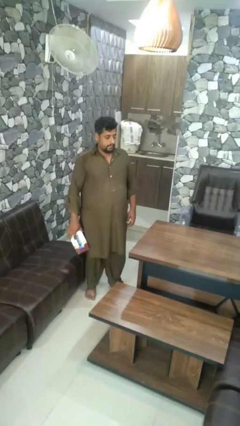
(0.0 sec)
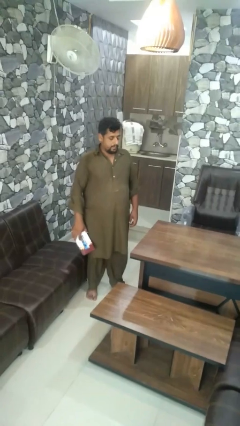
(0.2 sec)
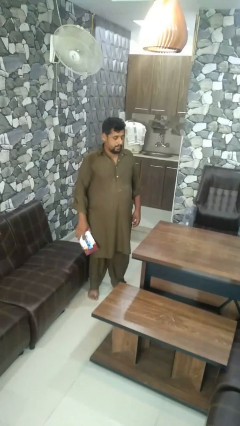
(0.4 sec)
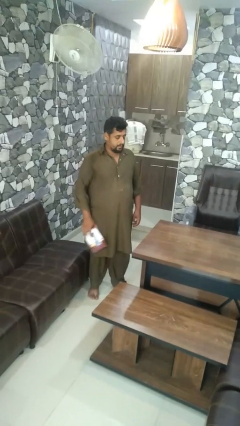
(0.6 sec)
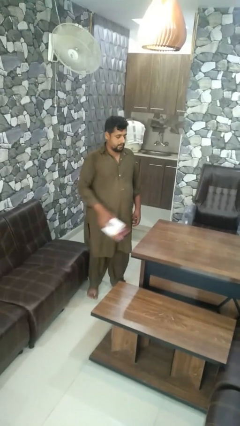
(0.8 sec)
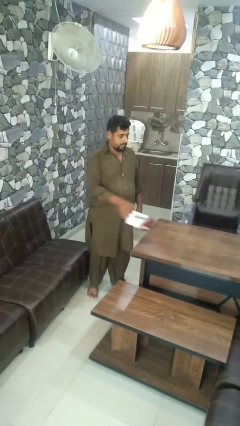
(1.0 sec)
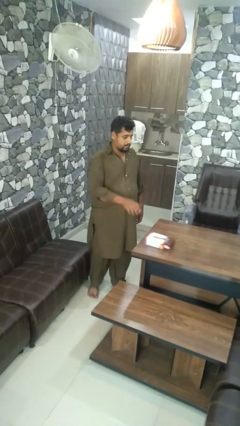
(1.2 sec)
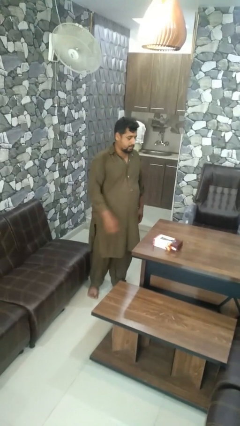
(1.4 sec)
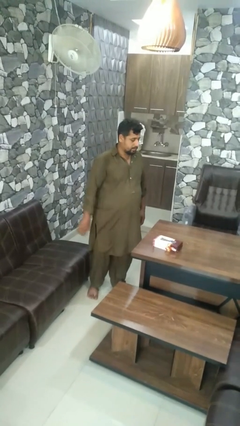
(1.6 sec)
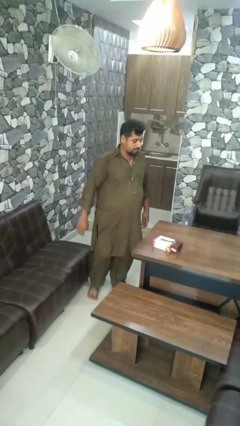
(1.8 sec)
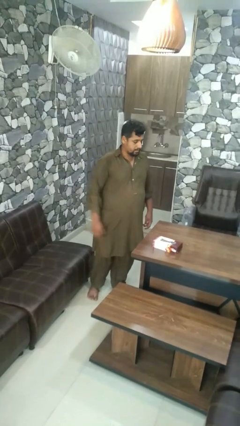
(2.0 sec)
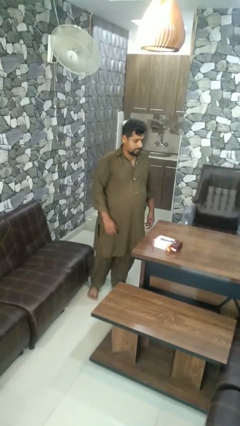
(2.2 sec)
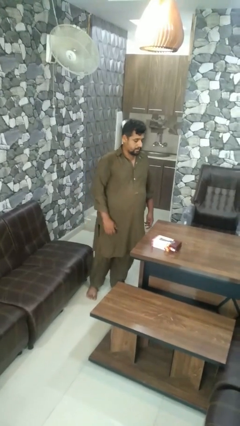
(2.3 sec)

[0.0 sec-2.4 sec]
person throws object on table

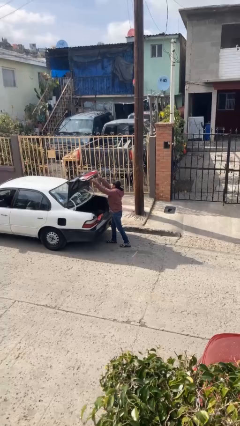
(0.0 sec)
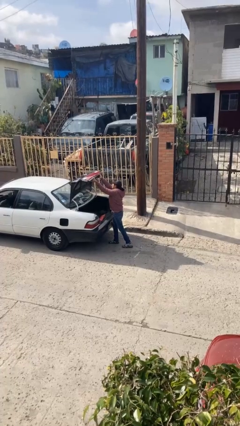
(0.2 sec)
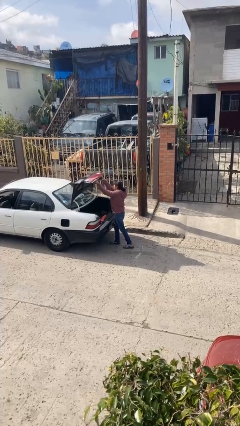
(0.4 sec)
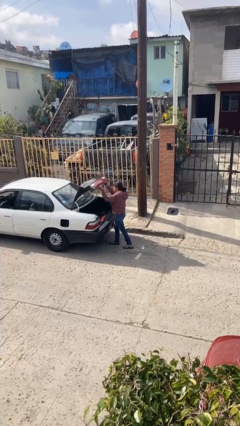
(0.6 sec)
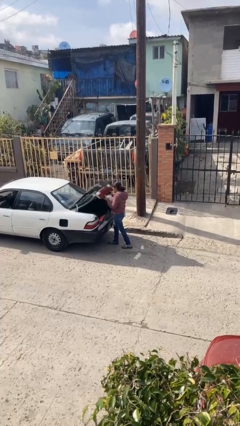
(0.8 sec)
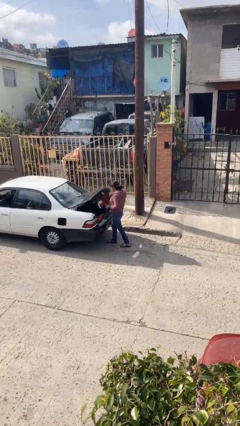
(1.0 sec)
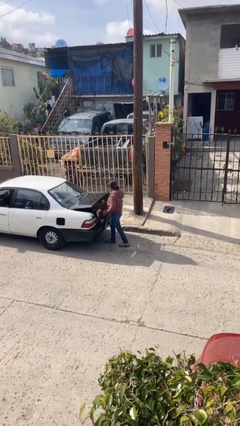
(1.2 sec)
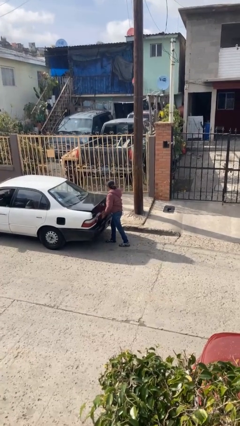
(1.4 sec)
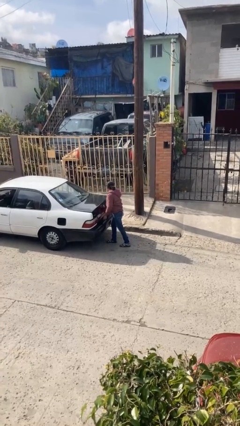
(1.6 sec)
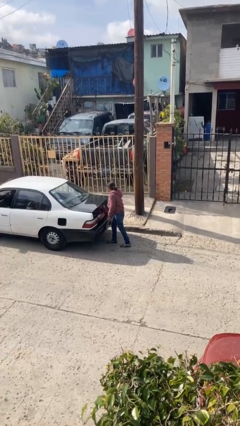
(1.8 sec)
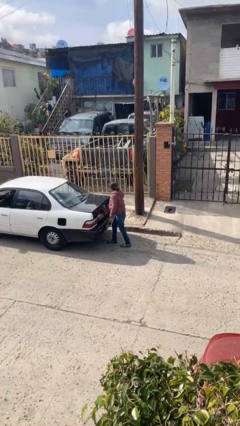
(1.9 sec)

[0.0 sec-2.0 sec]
person closes car trunk

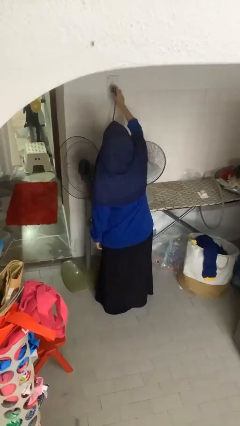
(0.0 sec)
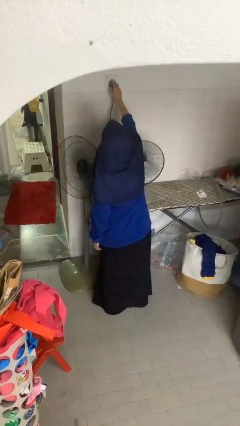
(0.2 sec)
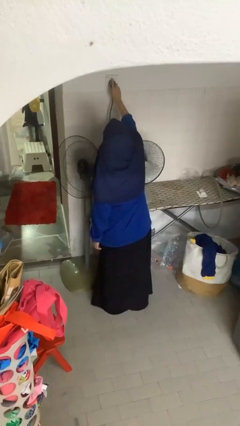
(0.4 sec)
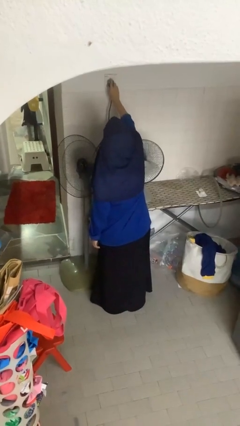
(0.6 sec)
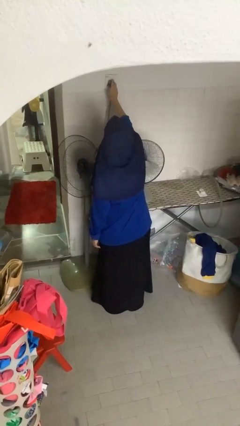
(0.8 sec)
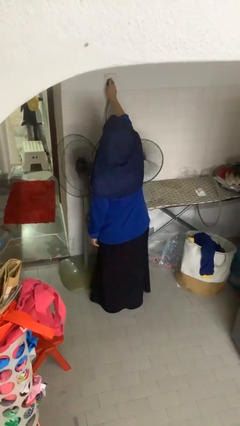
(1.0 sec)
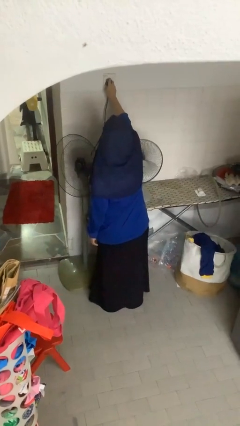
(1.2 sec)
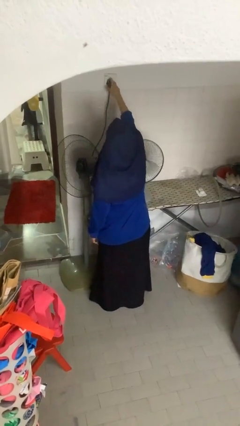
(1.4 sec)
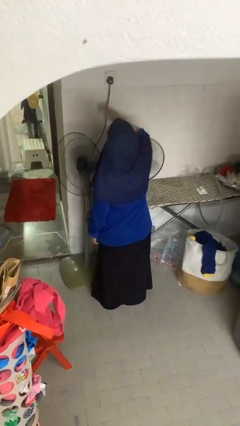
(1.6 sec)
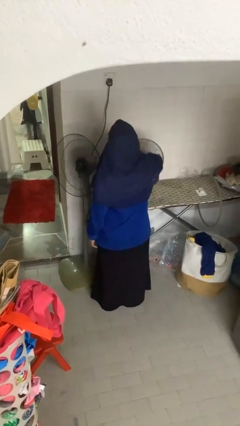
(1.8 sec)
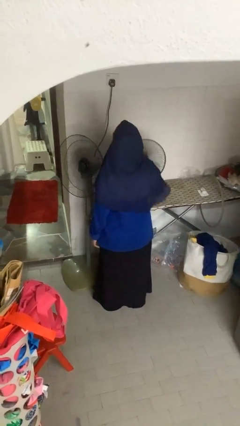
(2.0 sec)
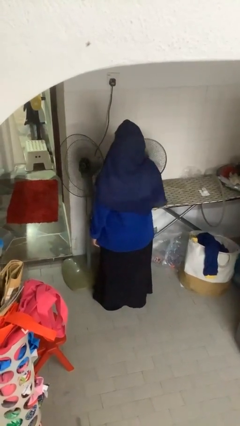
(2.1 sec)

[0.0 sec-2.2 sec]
person plugs into electrical socket

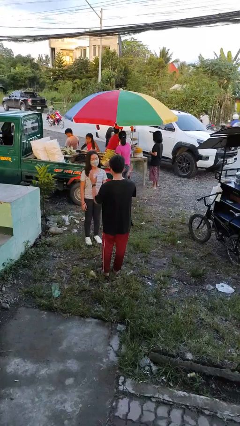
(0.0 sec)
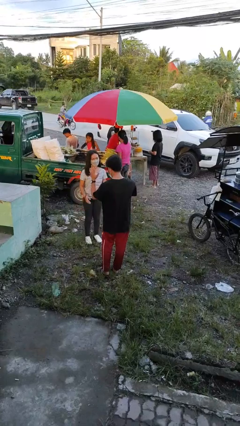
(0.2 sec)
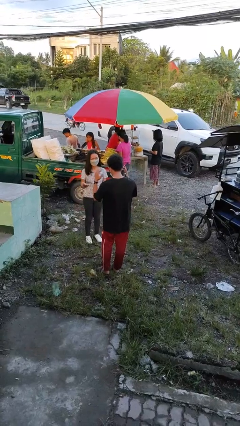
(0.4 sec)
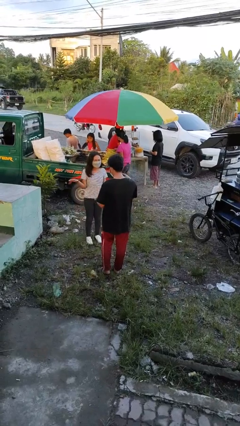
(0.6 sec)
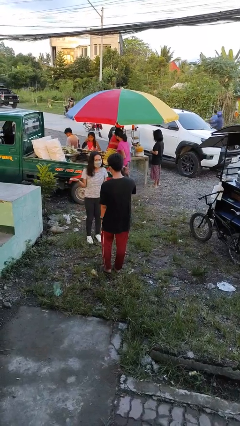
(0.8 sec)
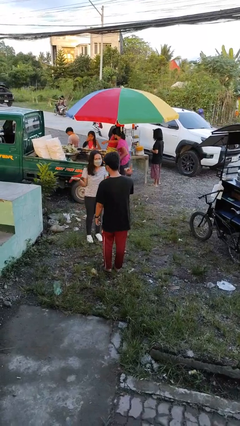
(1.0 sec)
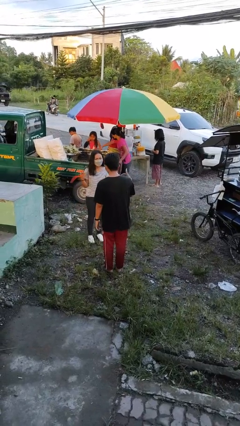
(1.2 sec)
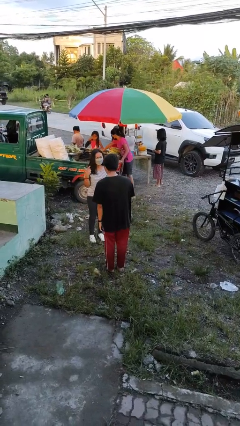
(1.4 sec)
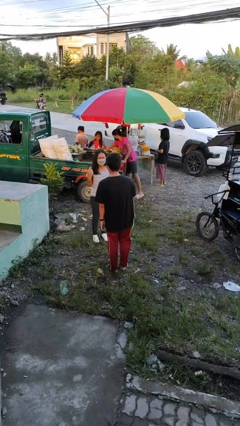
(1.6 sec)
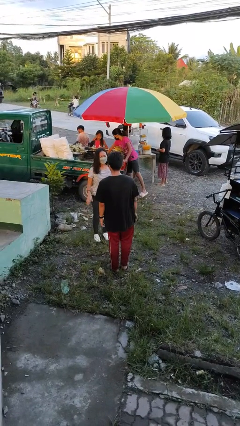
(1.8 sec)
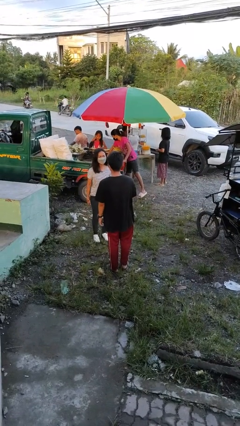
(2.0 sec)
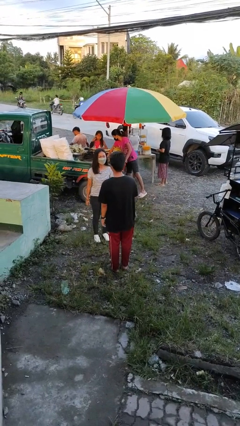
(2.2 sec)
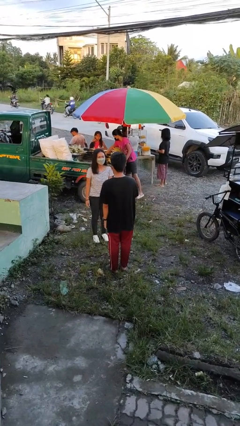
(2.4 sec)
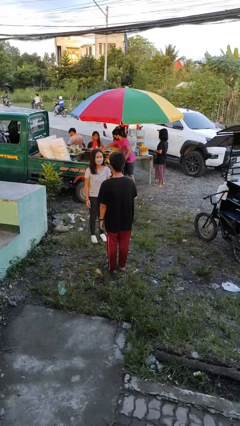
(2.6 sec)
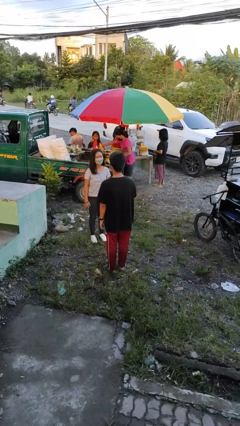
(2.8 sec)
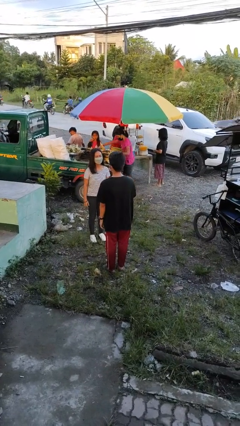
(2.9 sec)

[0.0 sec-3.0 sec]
person talks to person

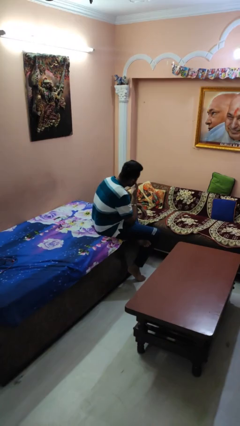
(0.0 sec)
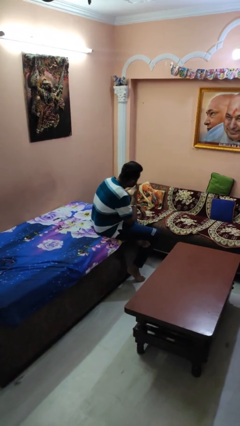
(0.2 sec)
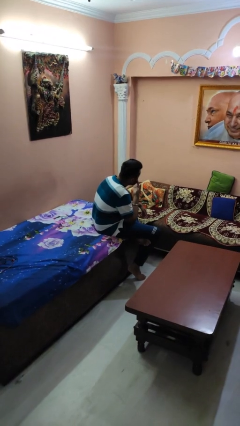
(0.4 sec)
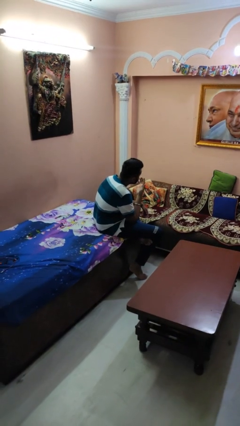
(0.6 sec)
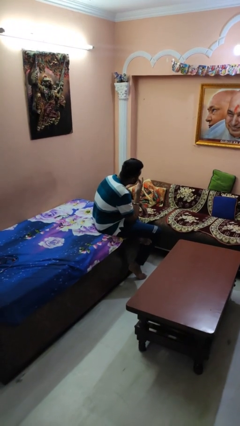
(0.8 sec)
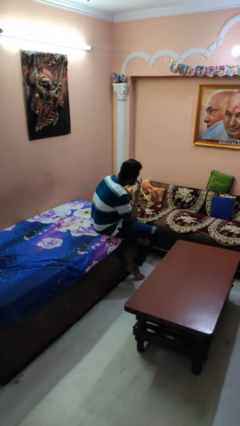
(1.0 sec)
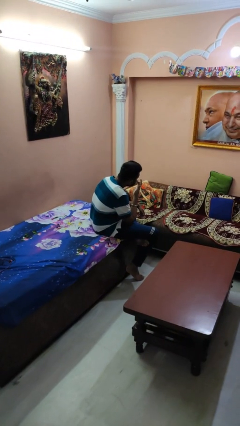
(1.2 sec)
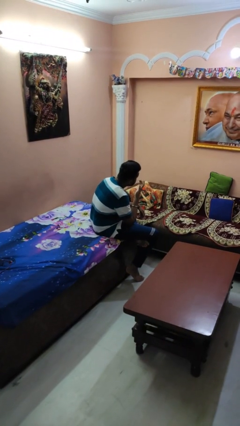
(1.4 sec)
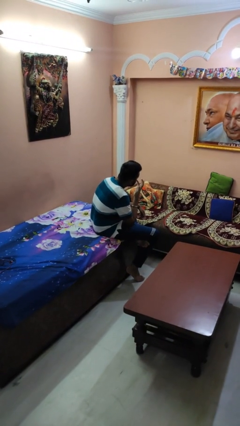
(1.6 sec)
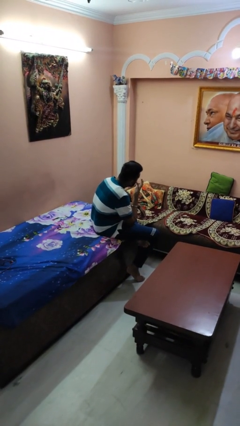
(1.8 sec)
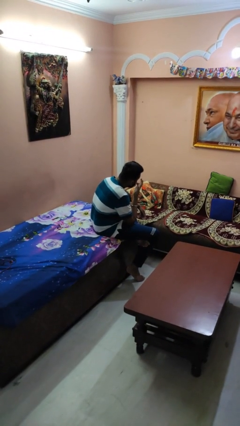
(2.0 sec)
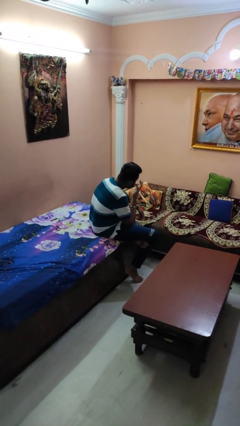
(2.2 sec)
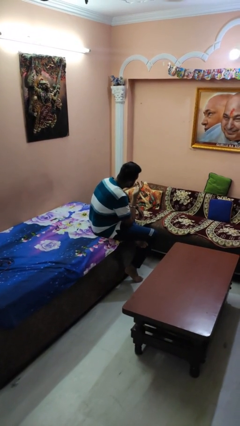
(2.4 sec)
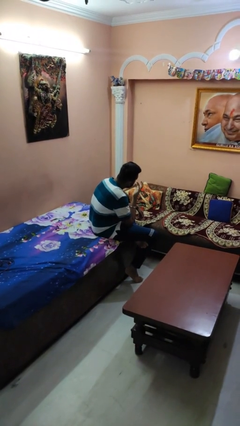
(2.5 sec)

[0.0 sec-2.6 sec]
person licks fingers

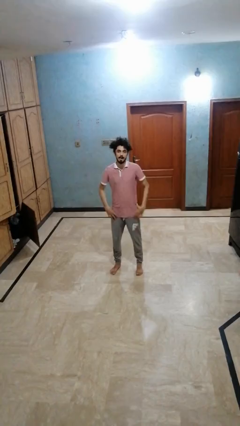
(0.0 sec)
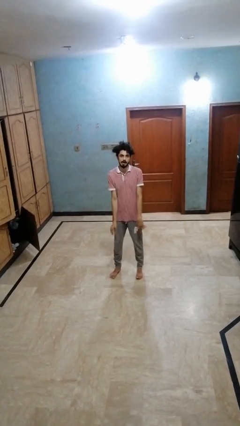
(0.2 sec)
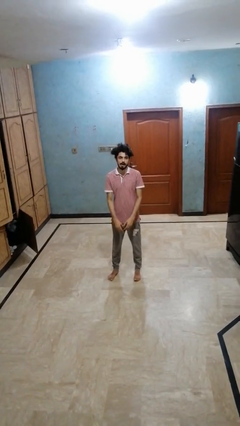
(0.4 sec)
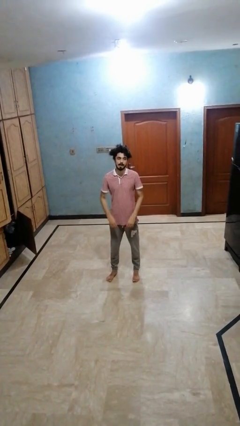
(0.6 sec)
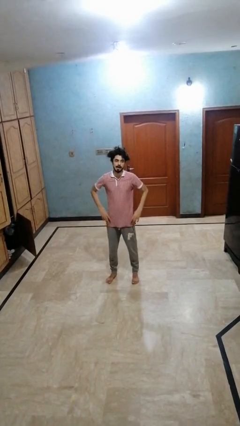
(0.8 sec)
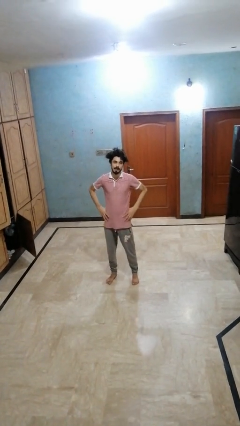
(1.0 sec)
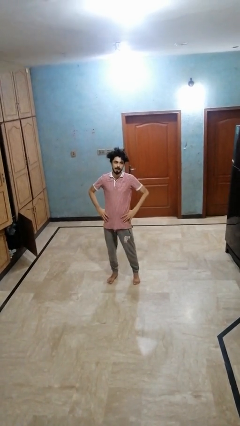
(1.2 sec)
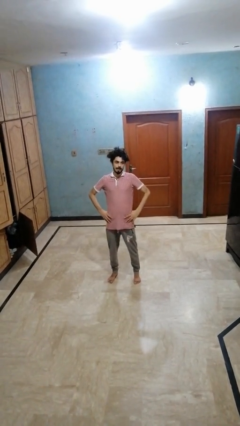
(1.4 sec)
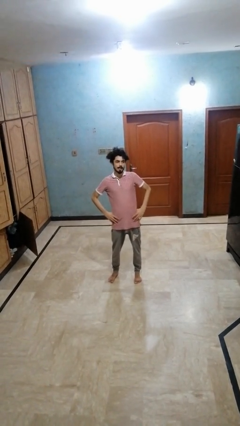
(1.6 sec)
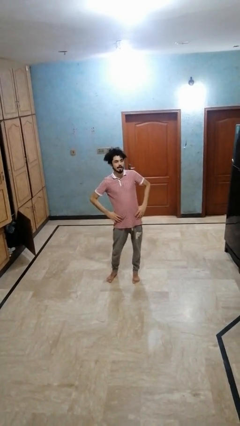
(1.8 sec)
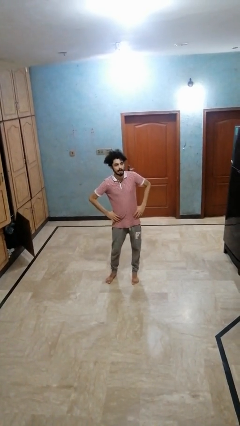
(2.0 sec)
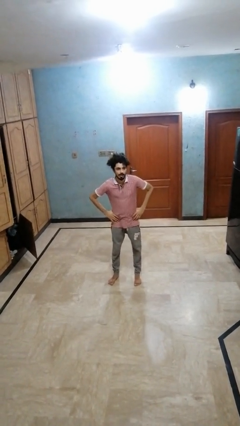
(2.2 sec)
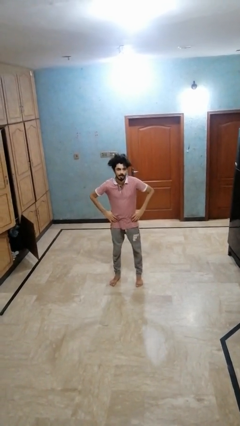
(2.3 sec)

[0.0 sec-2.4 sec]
person wiggles hips

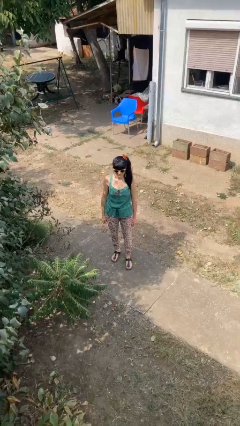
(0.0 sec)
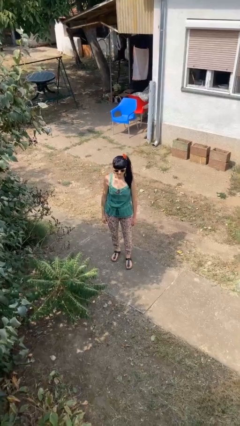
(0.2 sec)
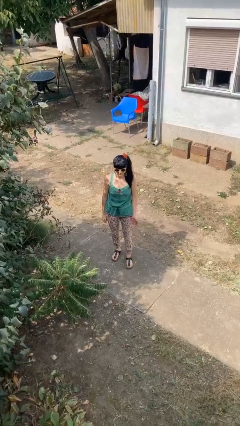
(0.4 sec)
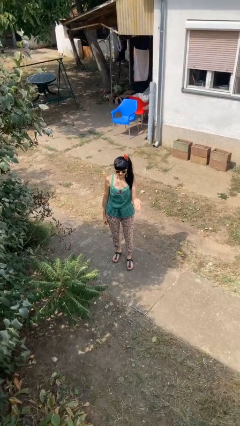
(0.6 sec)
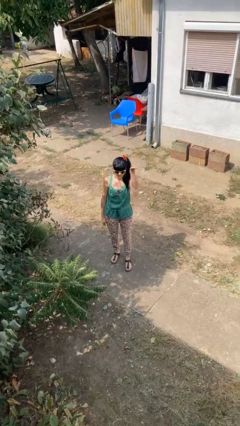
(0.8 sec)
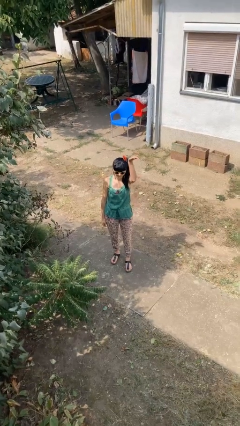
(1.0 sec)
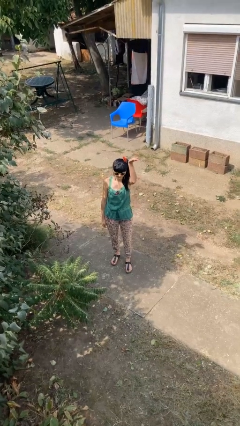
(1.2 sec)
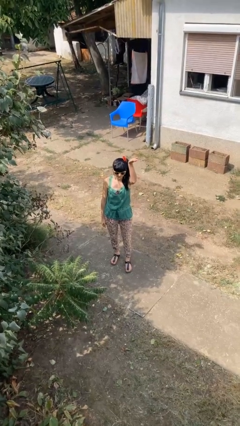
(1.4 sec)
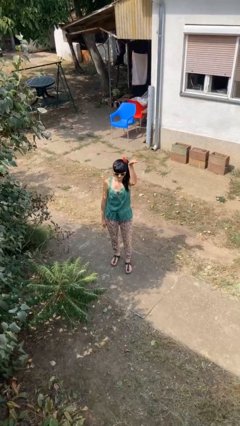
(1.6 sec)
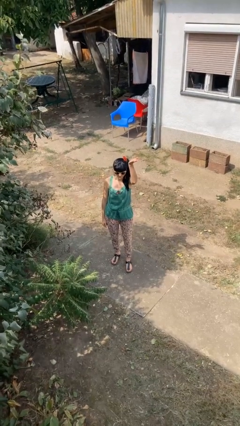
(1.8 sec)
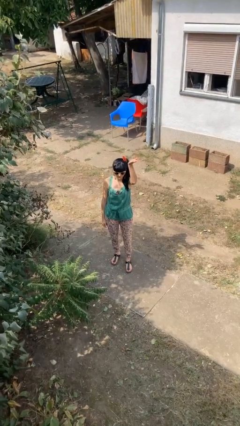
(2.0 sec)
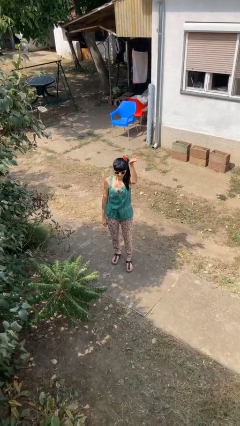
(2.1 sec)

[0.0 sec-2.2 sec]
person gestures swipe up

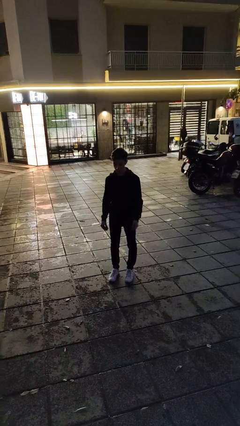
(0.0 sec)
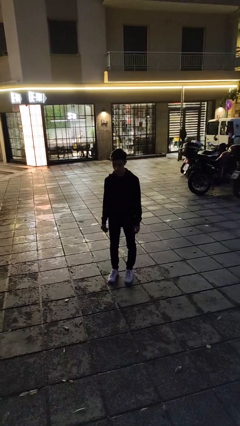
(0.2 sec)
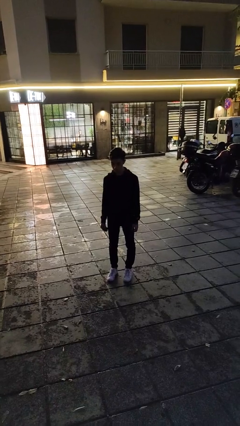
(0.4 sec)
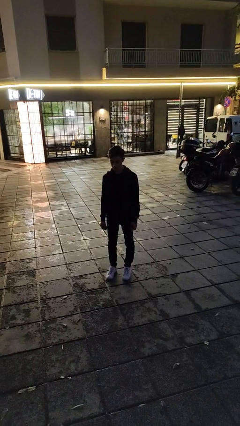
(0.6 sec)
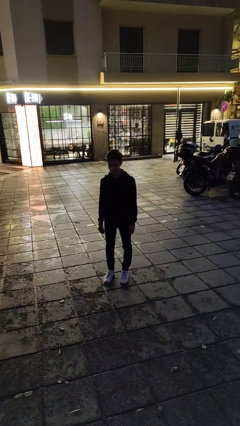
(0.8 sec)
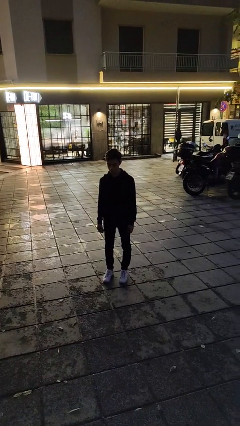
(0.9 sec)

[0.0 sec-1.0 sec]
person takes off ring
